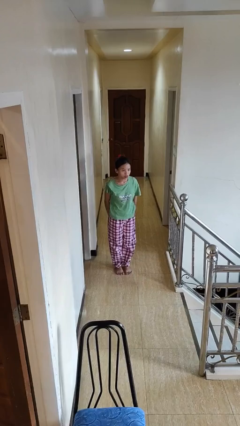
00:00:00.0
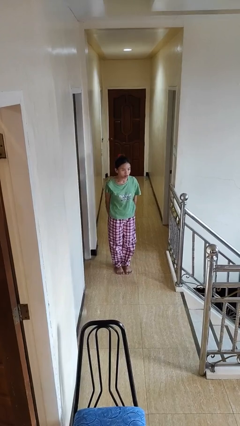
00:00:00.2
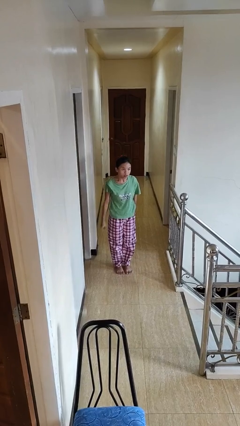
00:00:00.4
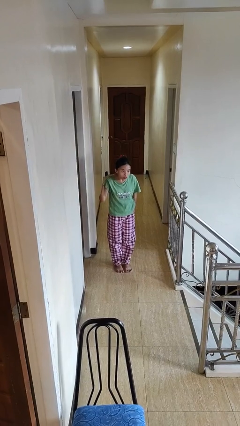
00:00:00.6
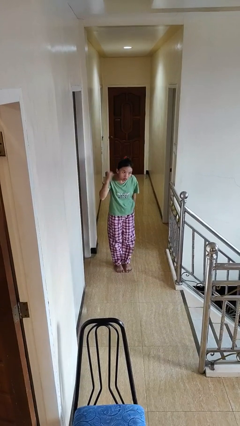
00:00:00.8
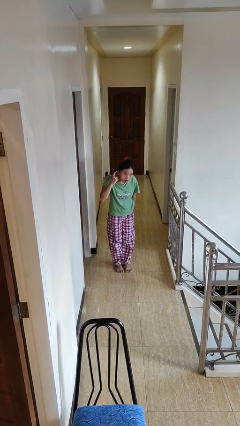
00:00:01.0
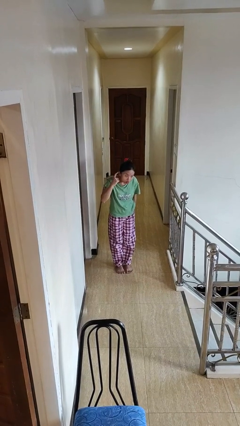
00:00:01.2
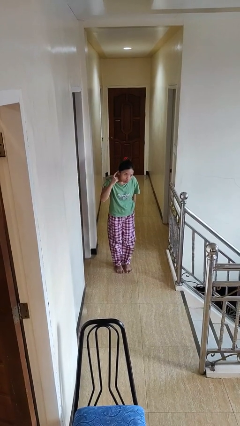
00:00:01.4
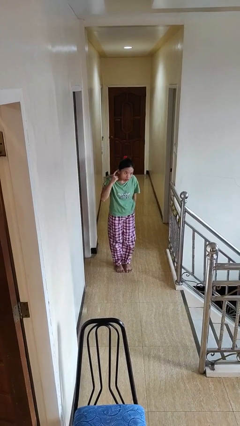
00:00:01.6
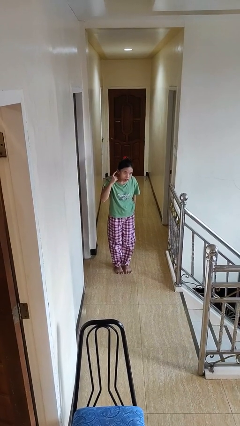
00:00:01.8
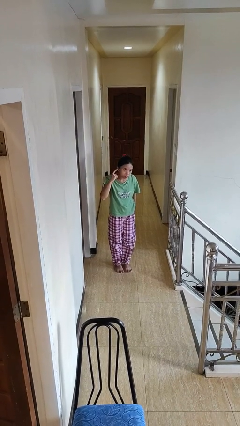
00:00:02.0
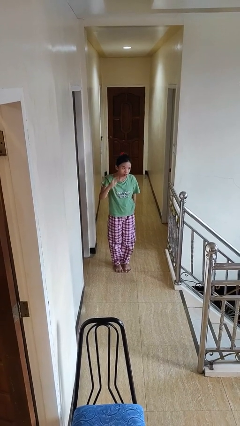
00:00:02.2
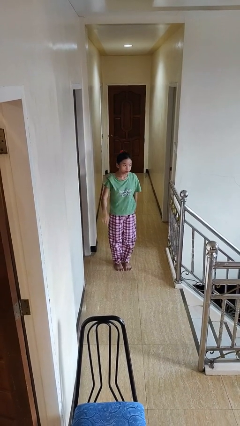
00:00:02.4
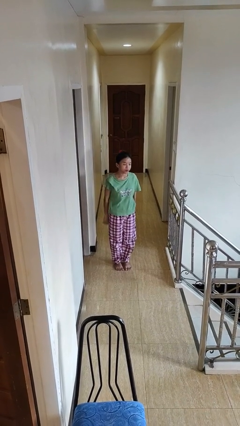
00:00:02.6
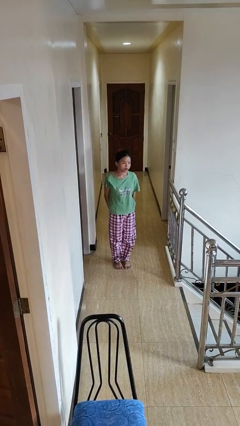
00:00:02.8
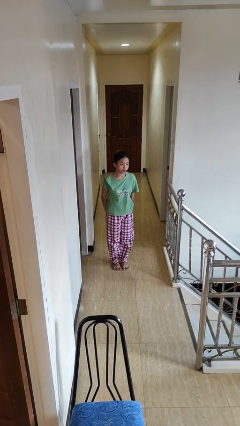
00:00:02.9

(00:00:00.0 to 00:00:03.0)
person gestures listen closely

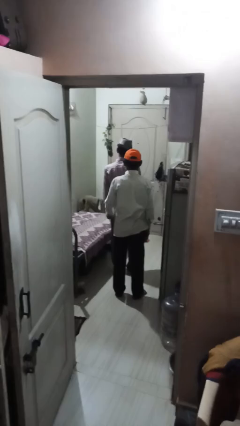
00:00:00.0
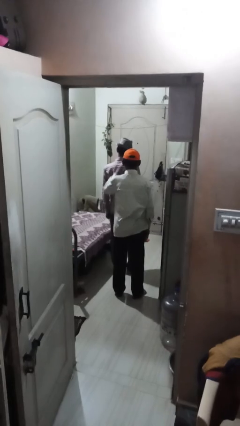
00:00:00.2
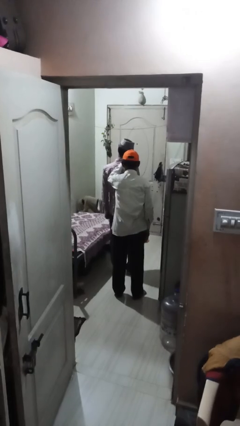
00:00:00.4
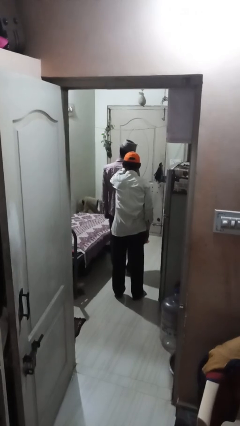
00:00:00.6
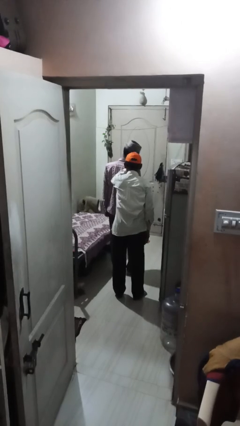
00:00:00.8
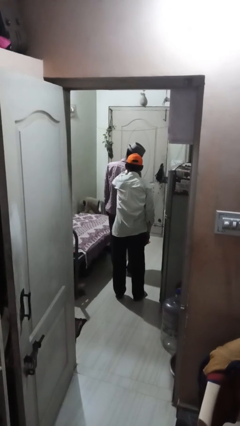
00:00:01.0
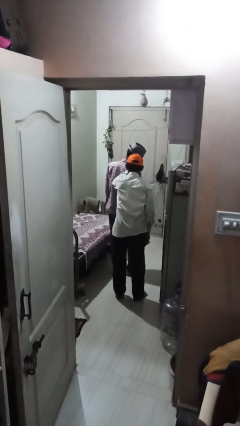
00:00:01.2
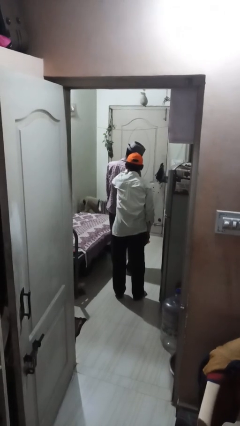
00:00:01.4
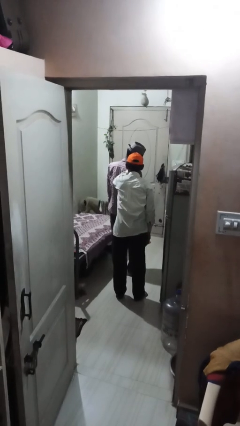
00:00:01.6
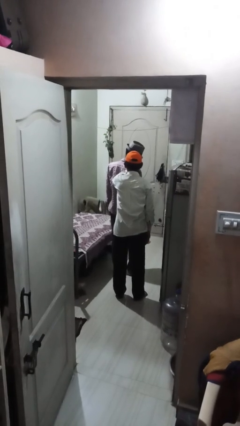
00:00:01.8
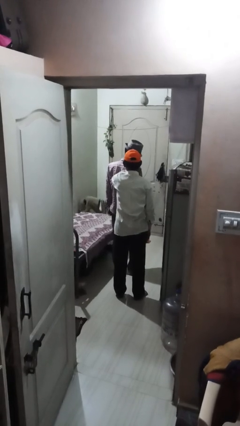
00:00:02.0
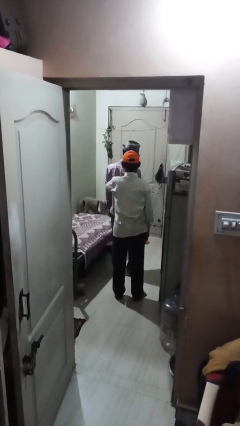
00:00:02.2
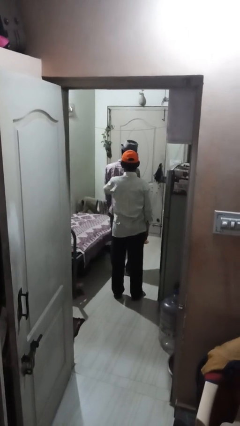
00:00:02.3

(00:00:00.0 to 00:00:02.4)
person touches back of person

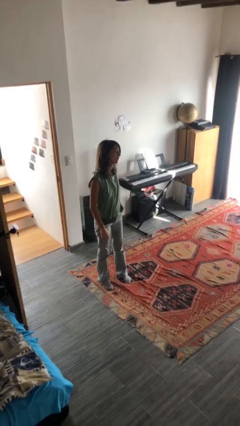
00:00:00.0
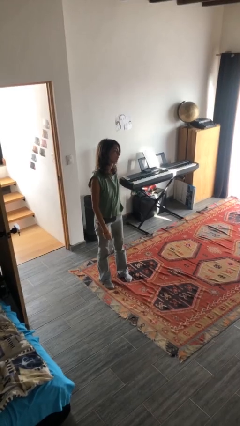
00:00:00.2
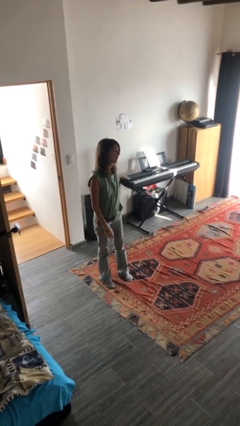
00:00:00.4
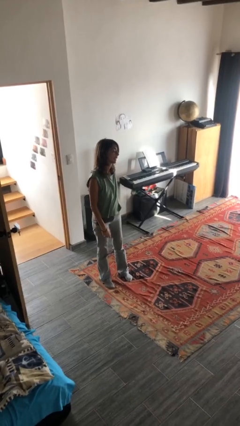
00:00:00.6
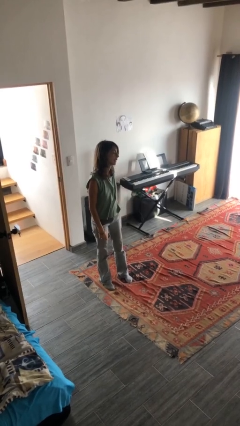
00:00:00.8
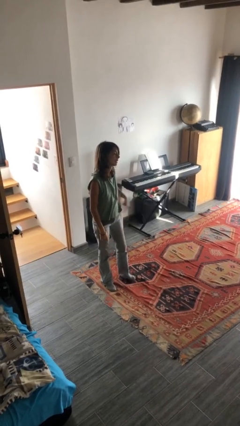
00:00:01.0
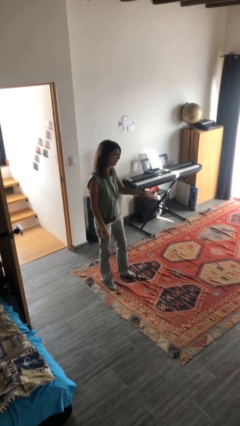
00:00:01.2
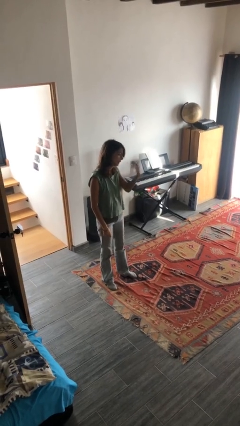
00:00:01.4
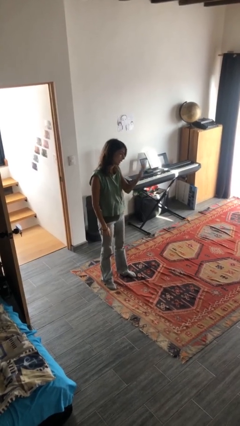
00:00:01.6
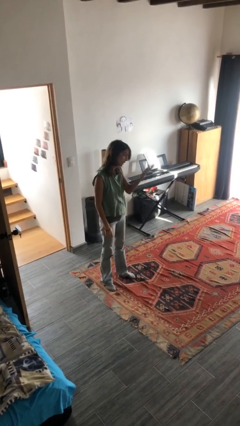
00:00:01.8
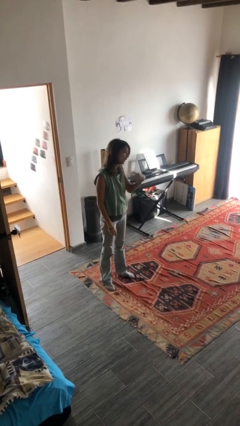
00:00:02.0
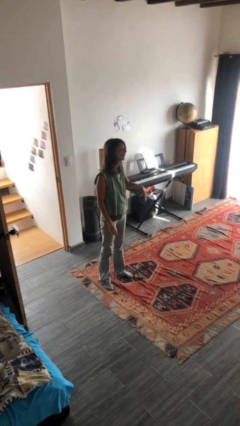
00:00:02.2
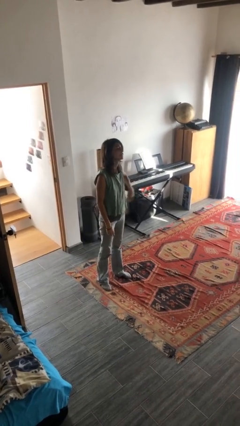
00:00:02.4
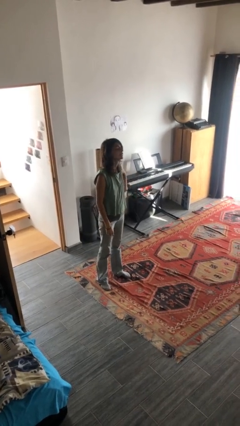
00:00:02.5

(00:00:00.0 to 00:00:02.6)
person gestures come here

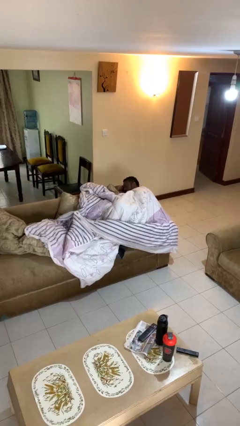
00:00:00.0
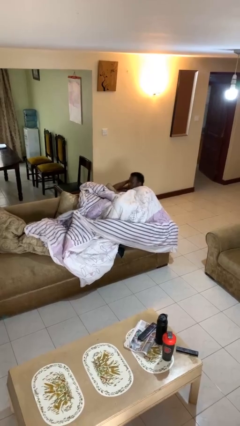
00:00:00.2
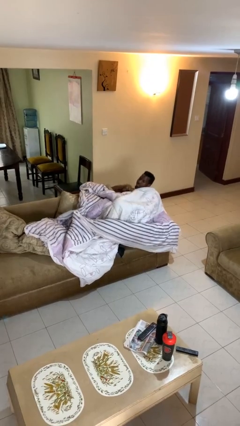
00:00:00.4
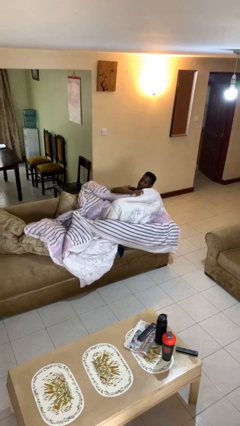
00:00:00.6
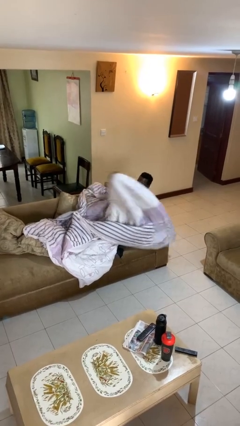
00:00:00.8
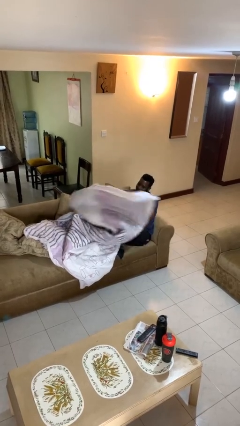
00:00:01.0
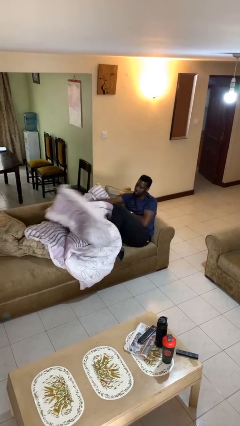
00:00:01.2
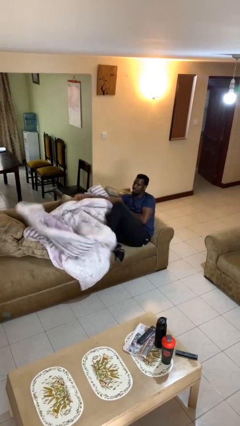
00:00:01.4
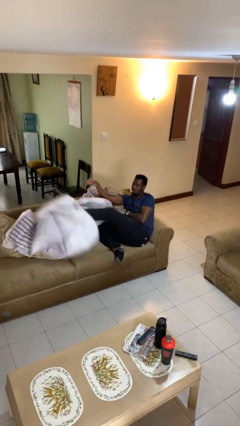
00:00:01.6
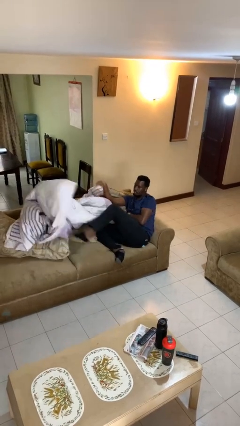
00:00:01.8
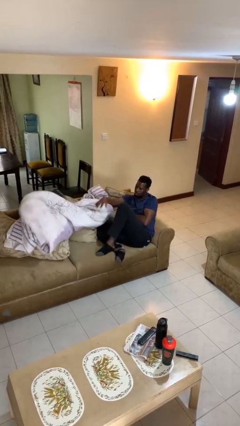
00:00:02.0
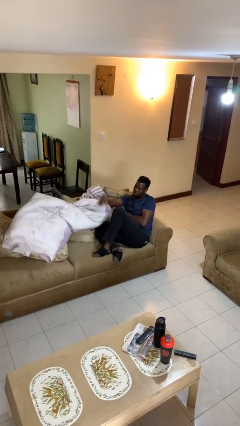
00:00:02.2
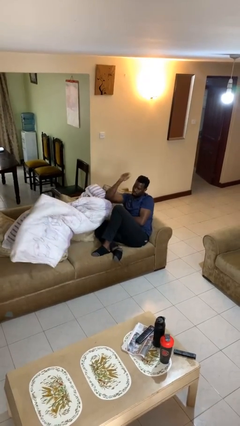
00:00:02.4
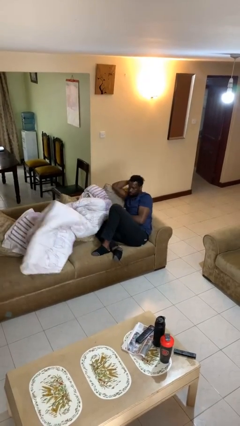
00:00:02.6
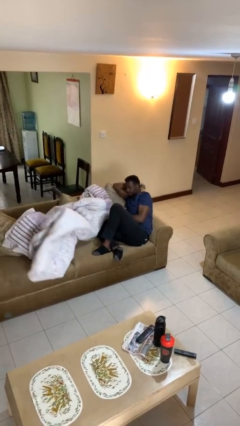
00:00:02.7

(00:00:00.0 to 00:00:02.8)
person uncovers with blanket

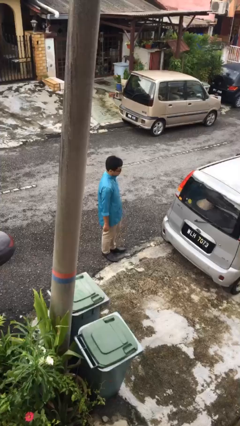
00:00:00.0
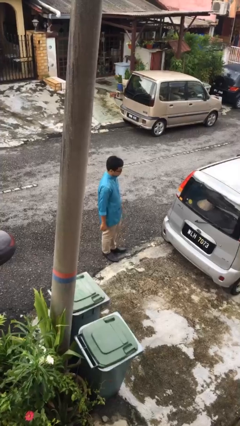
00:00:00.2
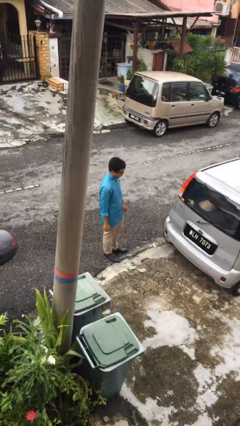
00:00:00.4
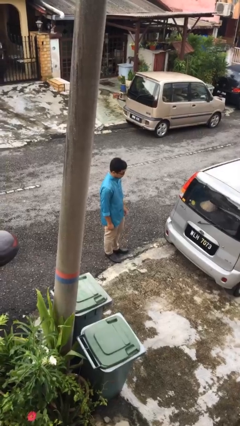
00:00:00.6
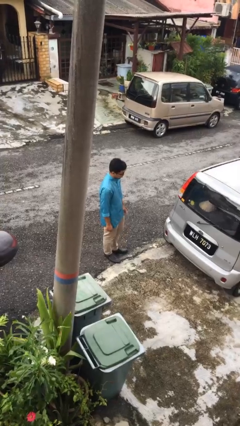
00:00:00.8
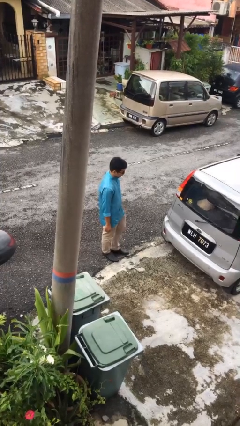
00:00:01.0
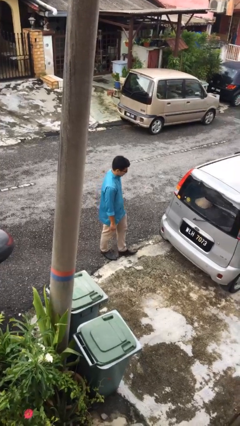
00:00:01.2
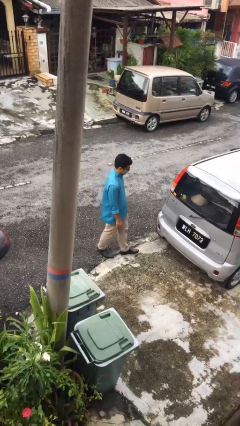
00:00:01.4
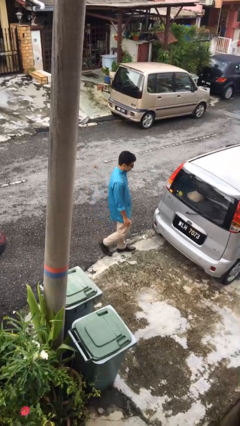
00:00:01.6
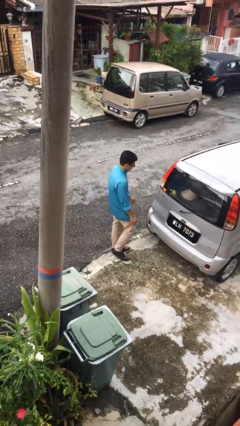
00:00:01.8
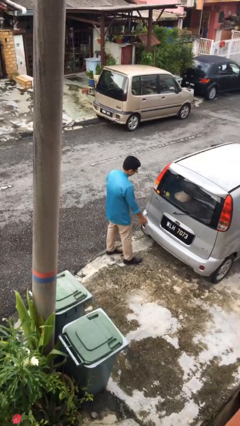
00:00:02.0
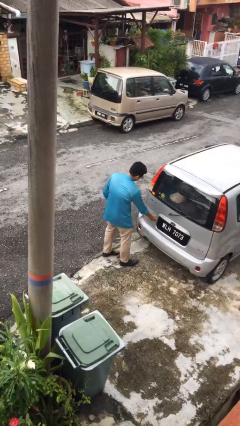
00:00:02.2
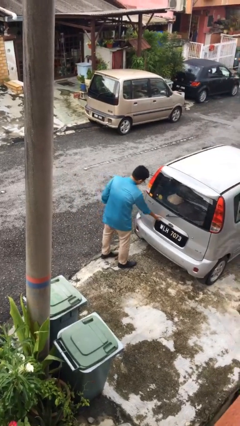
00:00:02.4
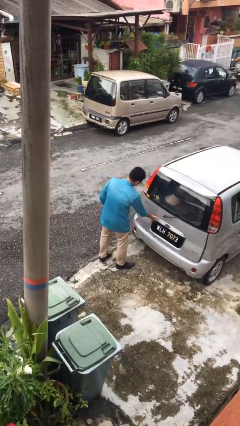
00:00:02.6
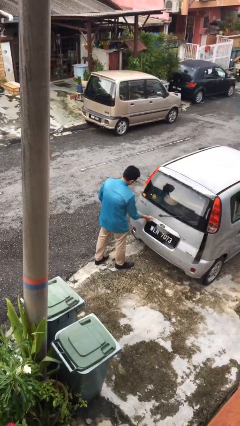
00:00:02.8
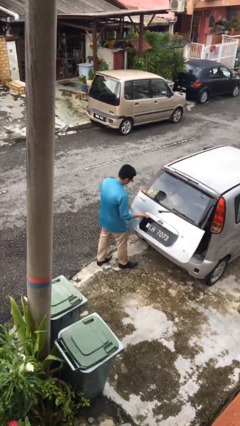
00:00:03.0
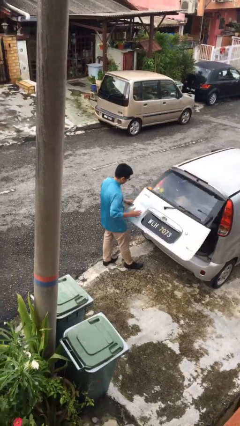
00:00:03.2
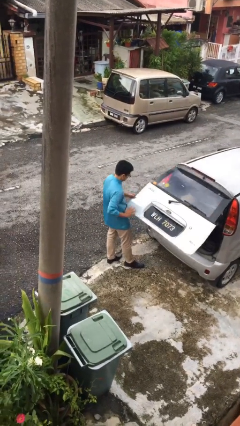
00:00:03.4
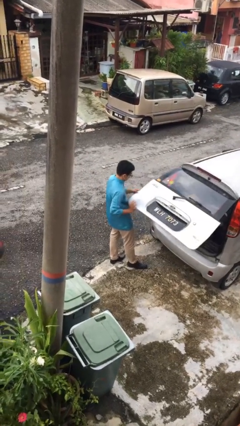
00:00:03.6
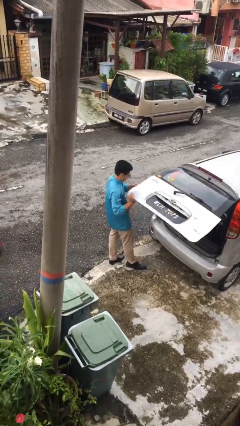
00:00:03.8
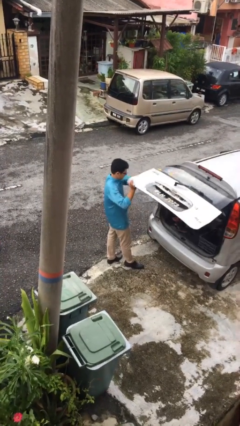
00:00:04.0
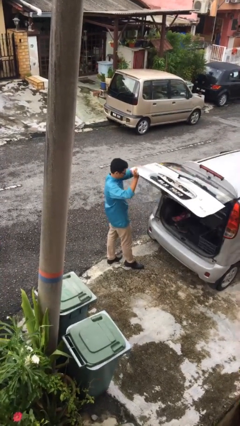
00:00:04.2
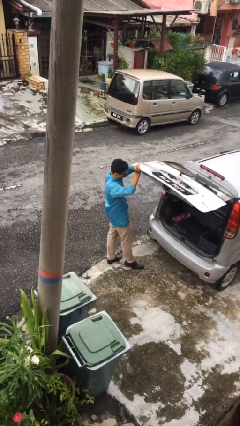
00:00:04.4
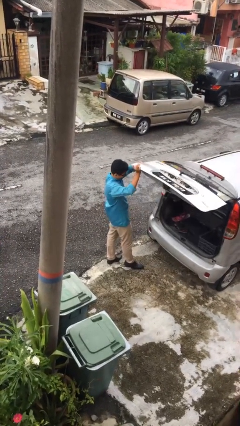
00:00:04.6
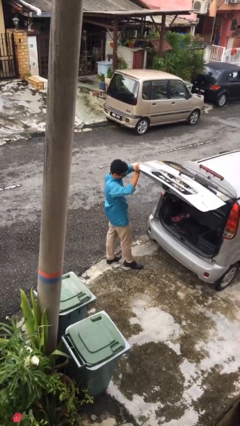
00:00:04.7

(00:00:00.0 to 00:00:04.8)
person opens car trunk

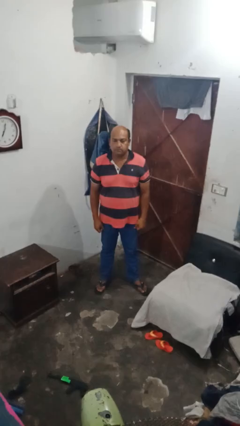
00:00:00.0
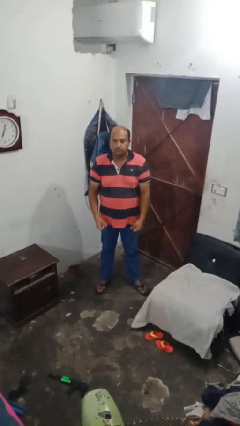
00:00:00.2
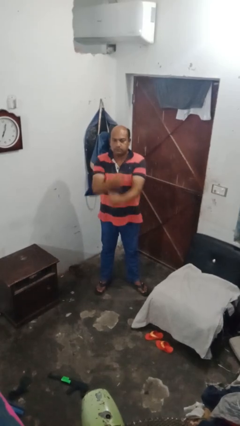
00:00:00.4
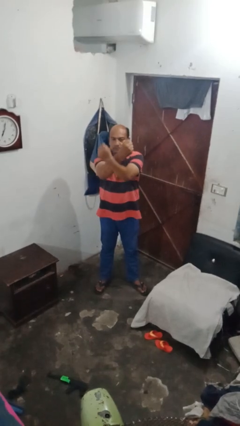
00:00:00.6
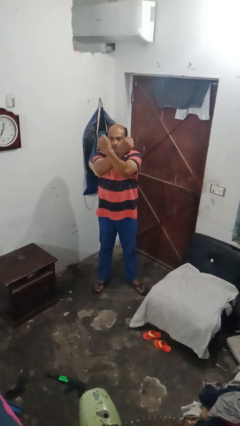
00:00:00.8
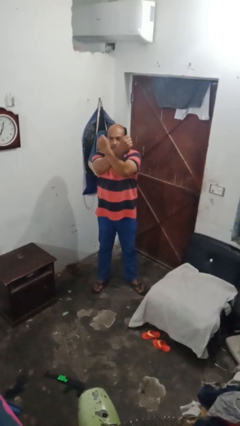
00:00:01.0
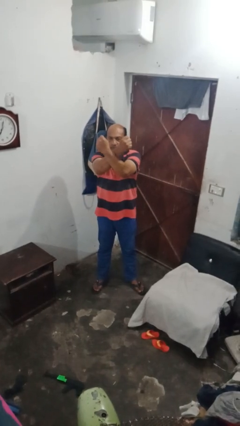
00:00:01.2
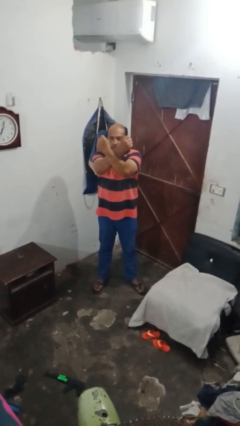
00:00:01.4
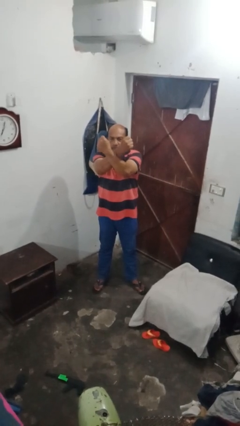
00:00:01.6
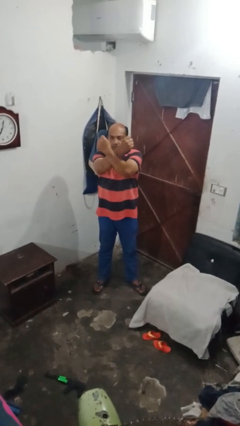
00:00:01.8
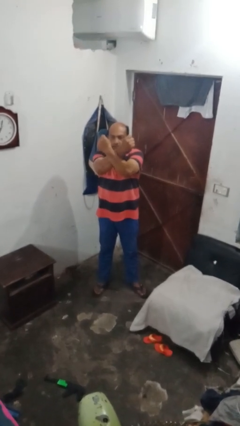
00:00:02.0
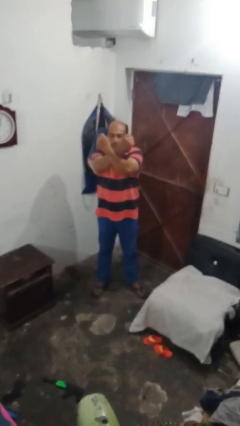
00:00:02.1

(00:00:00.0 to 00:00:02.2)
person gestures arms x
